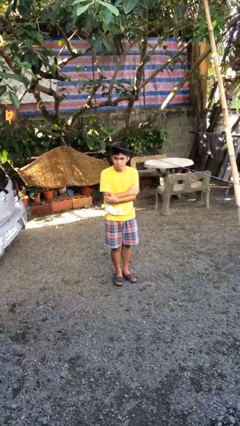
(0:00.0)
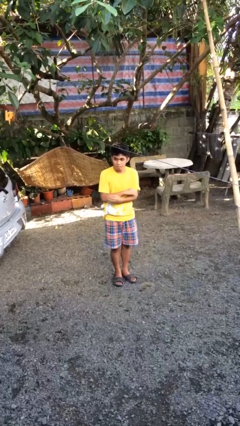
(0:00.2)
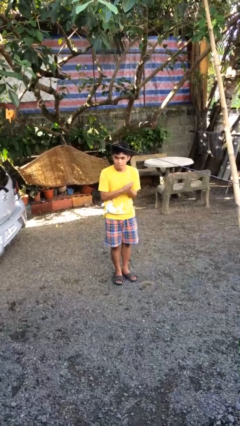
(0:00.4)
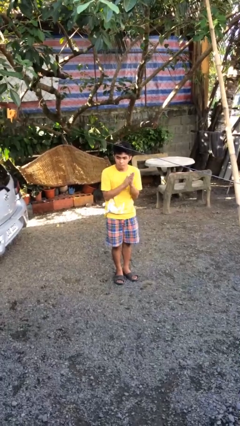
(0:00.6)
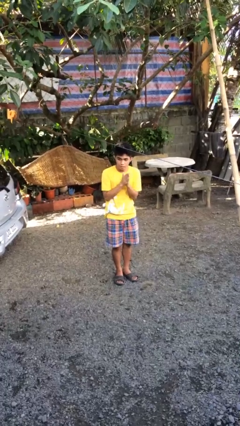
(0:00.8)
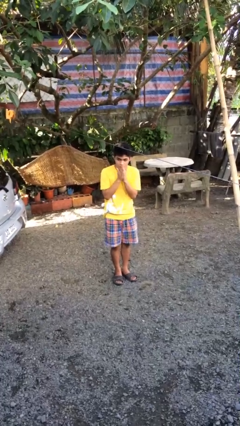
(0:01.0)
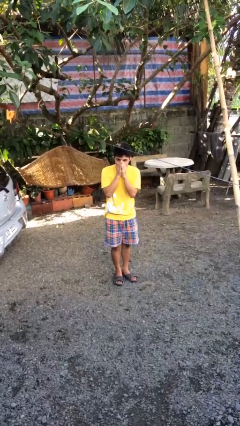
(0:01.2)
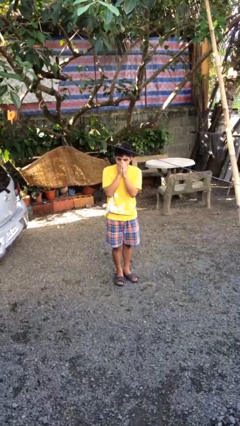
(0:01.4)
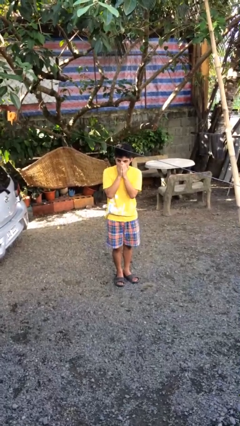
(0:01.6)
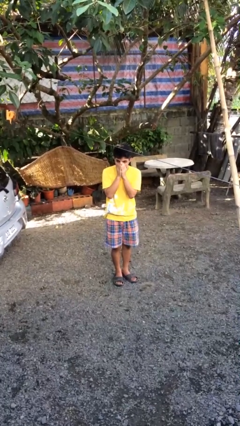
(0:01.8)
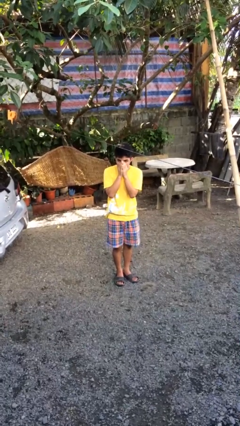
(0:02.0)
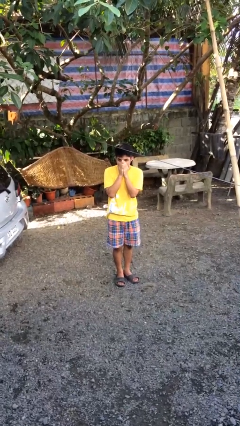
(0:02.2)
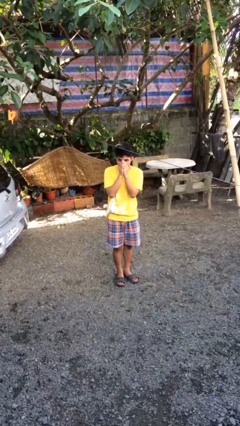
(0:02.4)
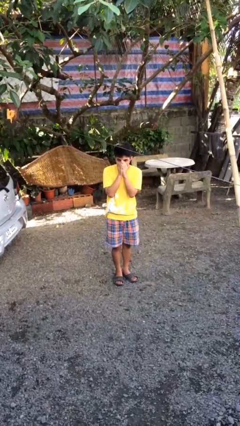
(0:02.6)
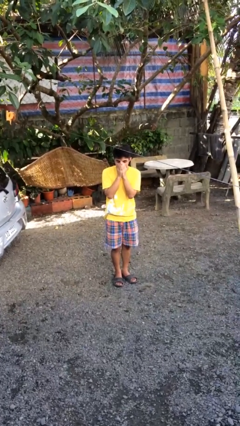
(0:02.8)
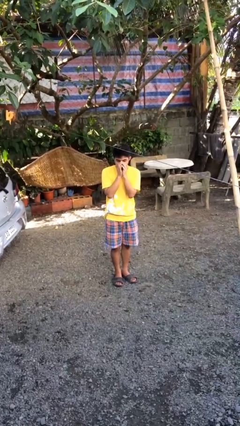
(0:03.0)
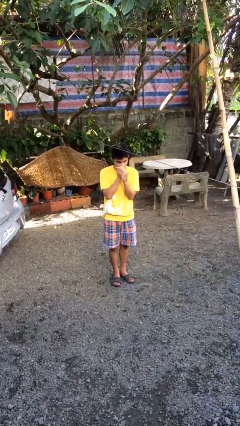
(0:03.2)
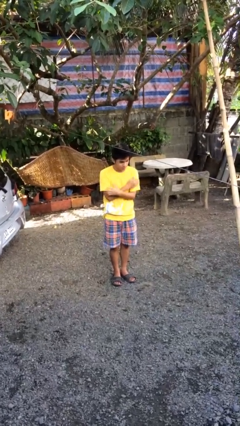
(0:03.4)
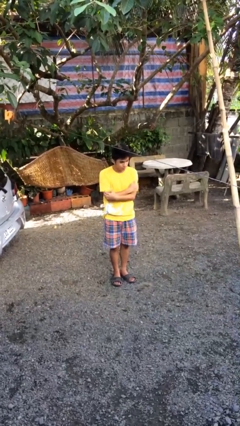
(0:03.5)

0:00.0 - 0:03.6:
person blows into hands

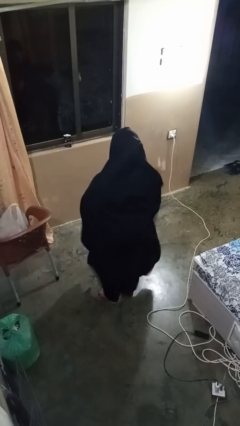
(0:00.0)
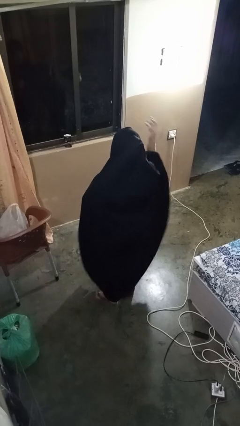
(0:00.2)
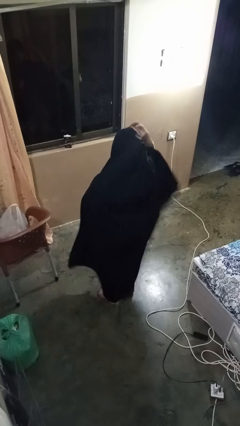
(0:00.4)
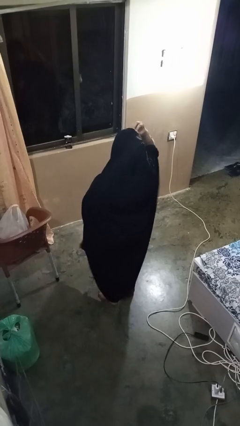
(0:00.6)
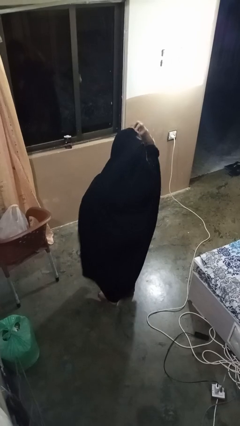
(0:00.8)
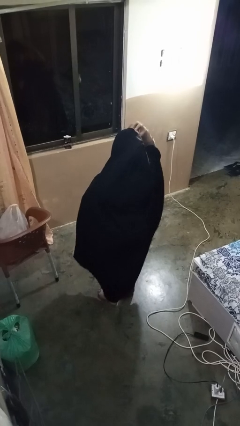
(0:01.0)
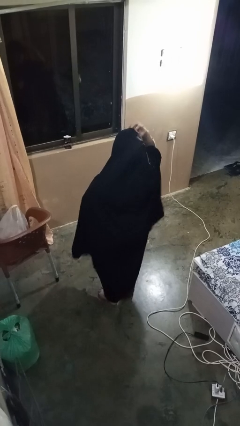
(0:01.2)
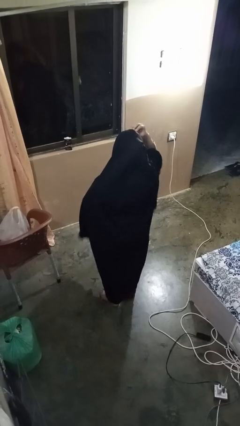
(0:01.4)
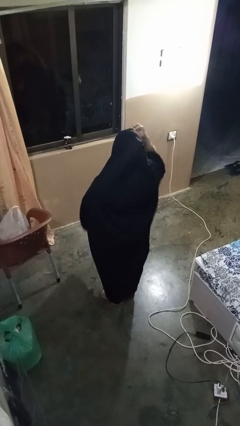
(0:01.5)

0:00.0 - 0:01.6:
person scratches face

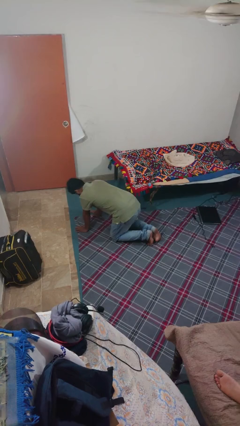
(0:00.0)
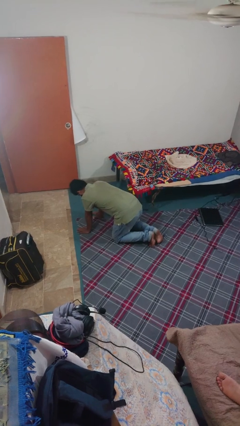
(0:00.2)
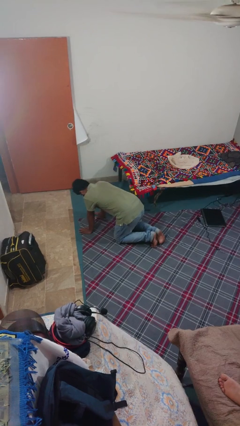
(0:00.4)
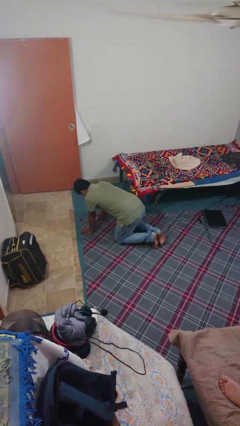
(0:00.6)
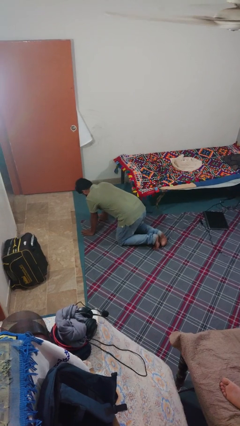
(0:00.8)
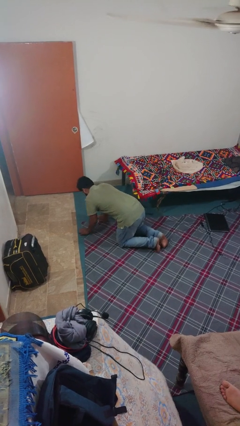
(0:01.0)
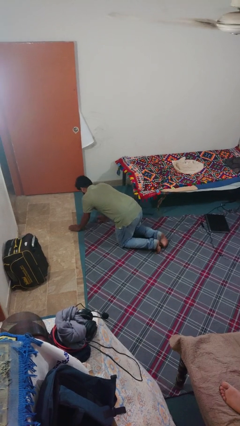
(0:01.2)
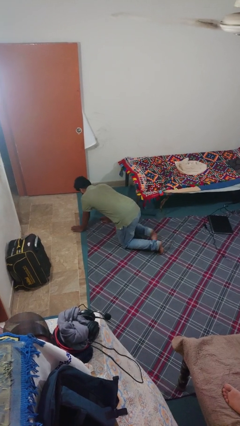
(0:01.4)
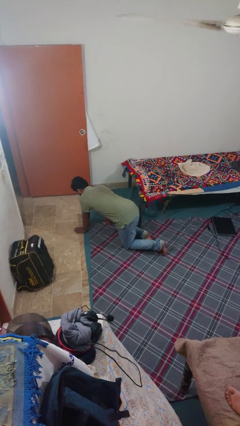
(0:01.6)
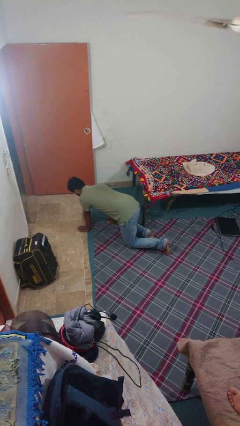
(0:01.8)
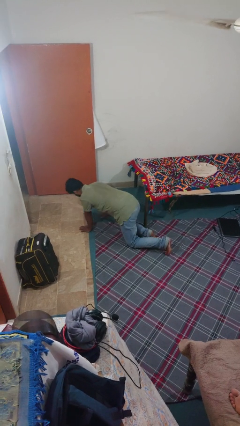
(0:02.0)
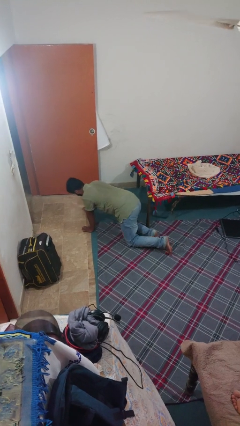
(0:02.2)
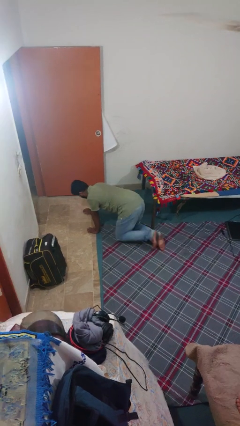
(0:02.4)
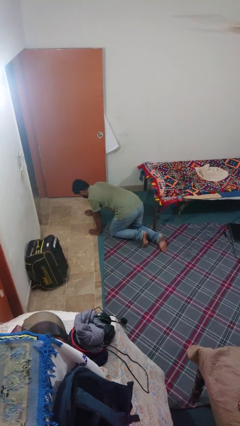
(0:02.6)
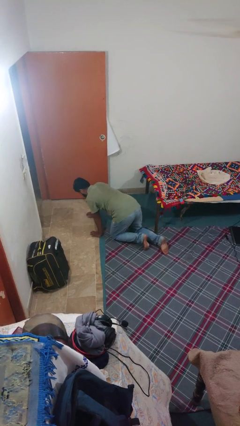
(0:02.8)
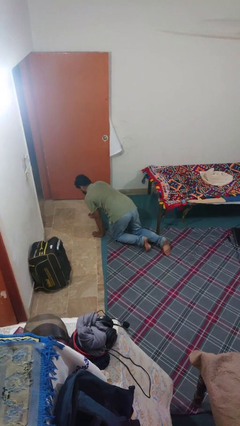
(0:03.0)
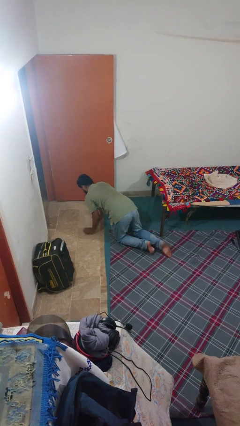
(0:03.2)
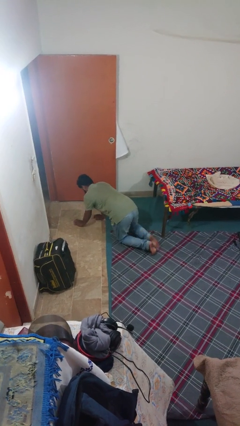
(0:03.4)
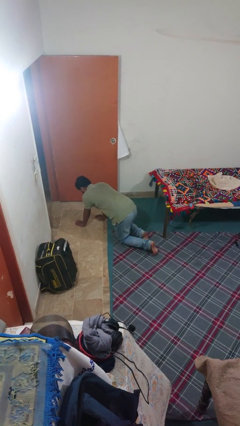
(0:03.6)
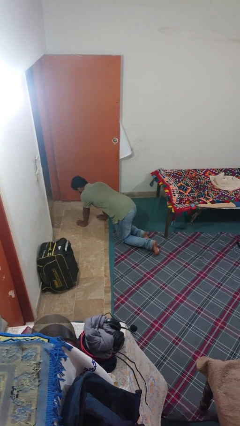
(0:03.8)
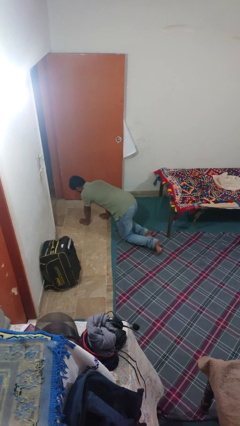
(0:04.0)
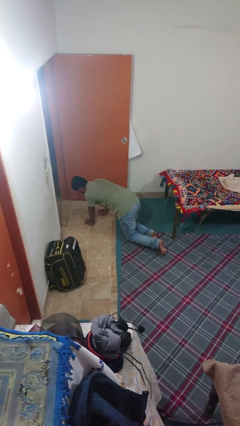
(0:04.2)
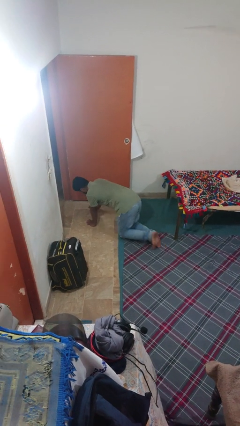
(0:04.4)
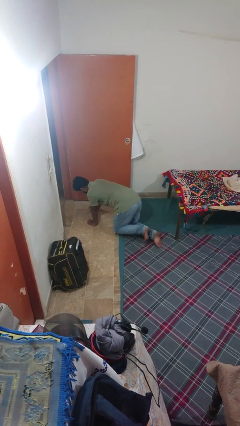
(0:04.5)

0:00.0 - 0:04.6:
person crawls

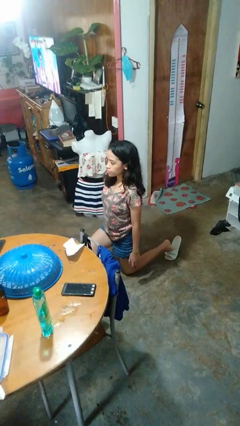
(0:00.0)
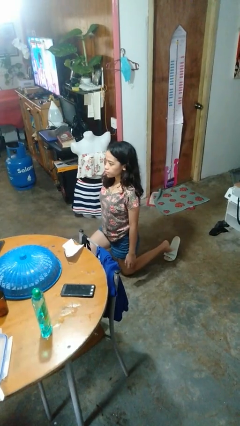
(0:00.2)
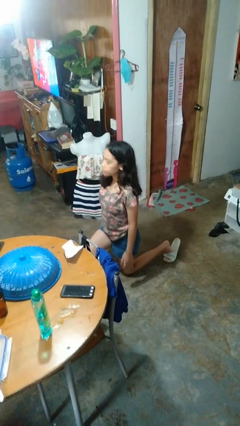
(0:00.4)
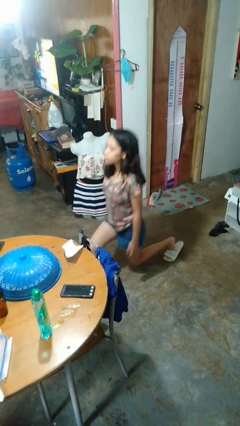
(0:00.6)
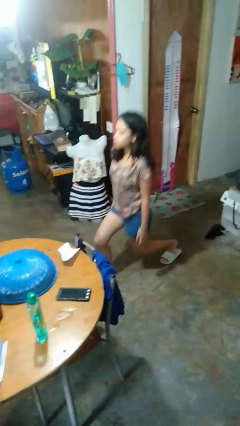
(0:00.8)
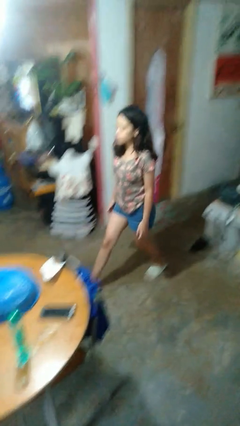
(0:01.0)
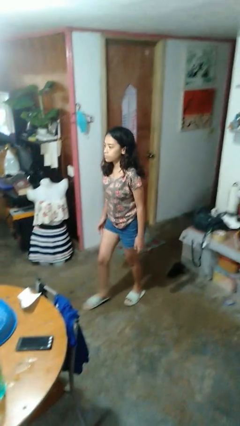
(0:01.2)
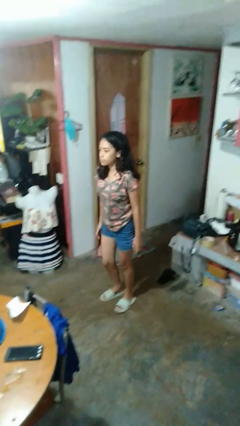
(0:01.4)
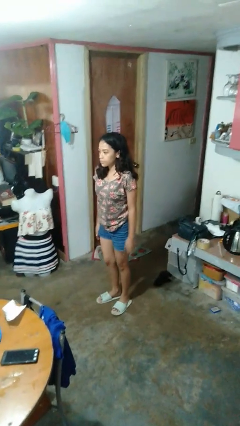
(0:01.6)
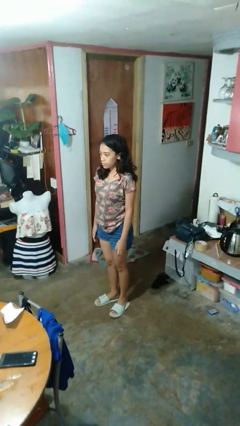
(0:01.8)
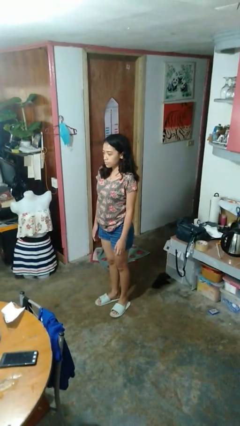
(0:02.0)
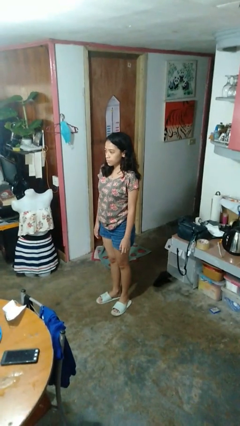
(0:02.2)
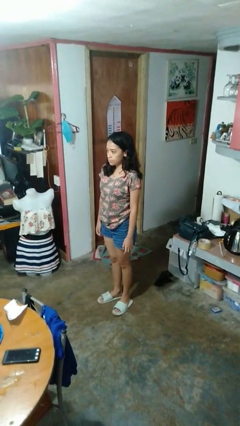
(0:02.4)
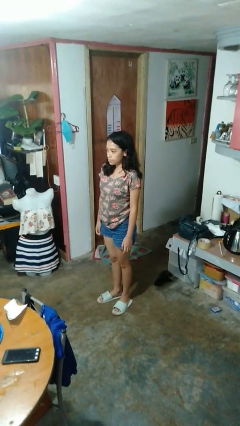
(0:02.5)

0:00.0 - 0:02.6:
person stands up from floor

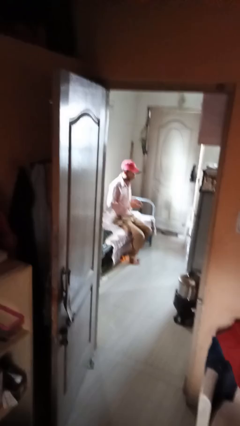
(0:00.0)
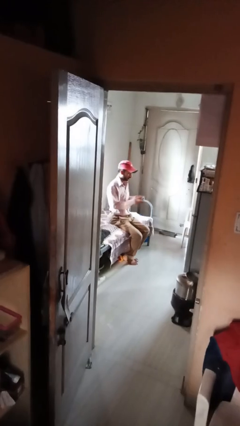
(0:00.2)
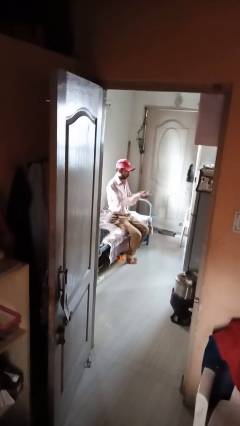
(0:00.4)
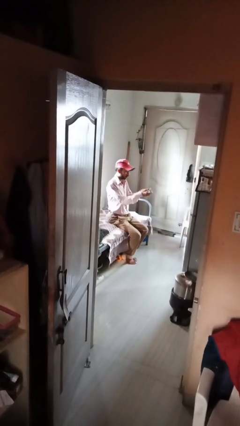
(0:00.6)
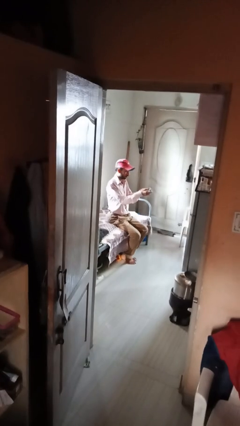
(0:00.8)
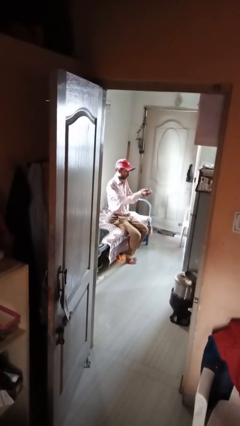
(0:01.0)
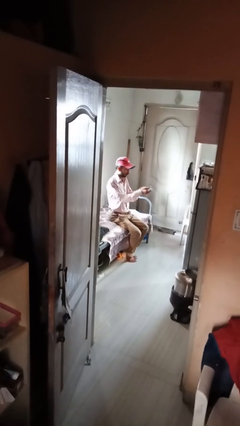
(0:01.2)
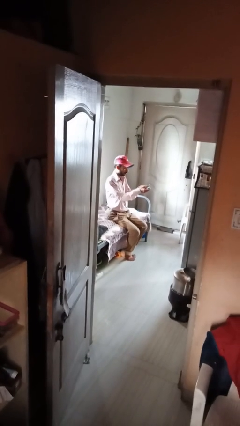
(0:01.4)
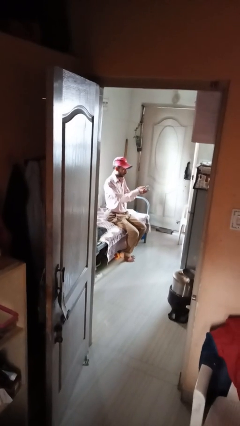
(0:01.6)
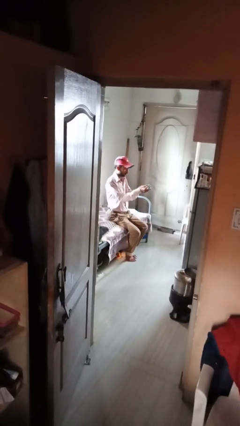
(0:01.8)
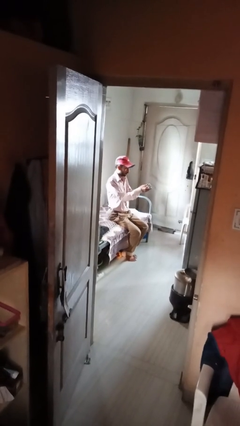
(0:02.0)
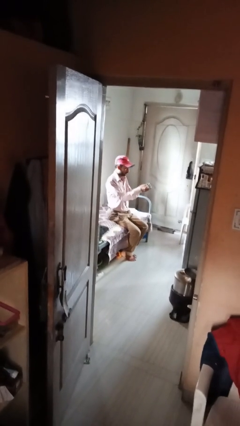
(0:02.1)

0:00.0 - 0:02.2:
person clips fingernails

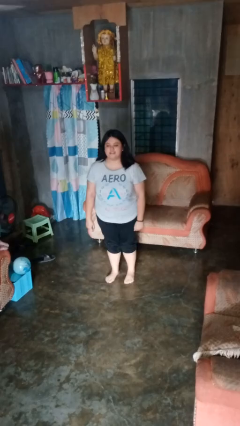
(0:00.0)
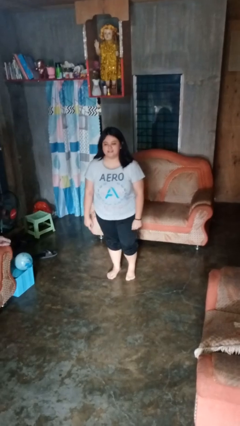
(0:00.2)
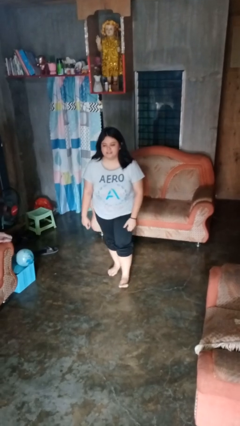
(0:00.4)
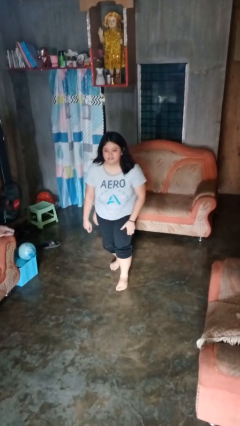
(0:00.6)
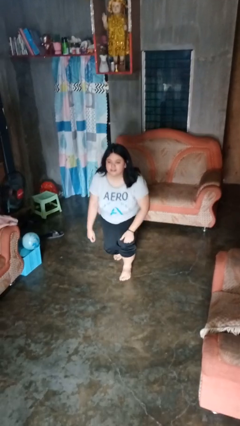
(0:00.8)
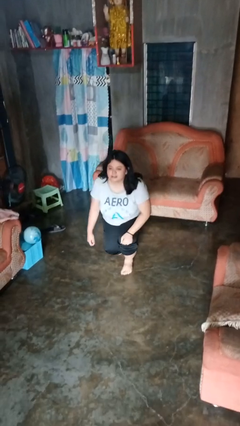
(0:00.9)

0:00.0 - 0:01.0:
person kneels

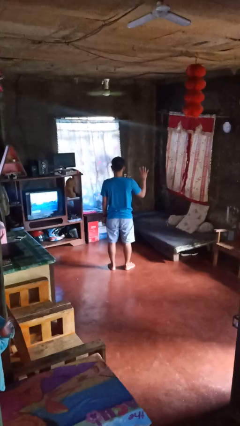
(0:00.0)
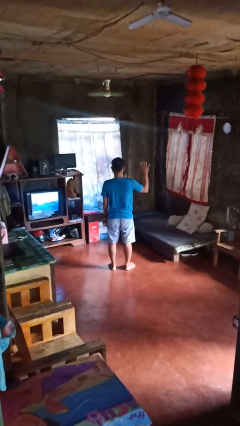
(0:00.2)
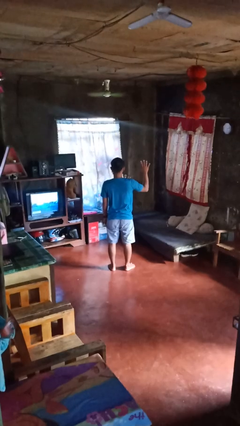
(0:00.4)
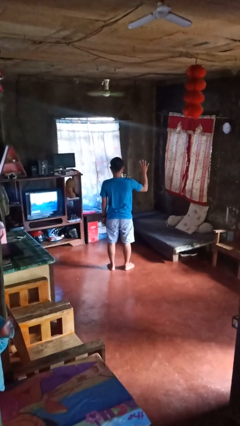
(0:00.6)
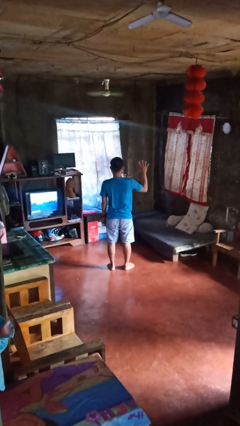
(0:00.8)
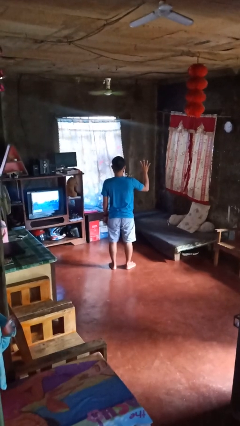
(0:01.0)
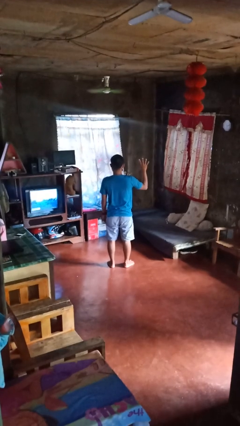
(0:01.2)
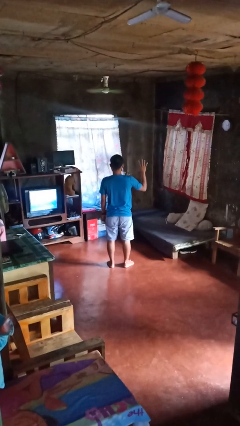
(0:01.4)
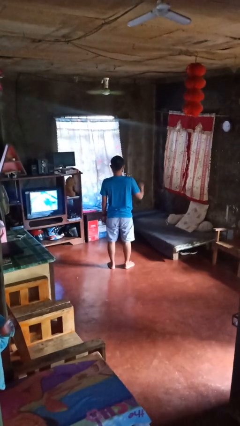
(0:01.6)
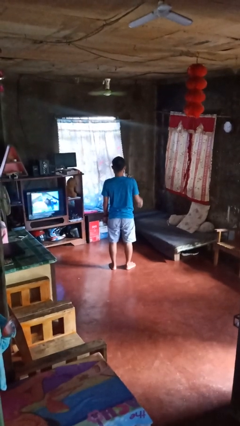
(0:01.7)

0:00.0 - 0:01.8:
person gestures number four
